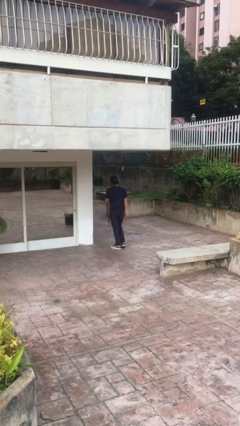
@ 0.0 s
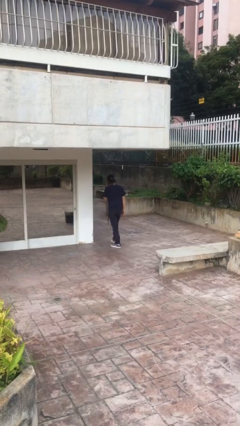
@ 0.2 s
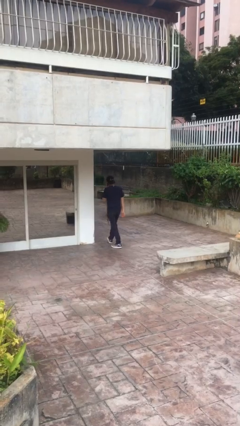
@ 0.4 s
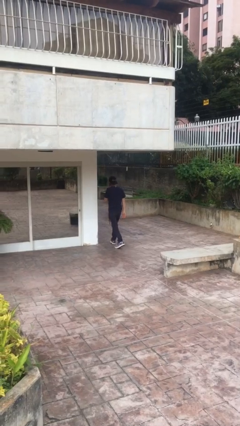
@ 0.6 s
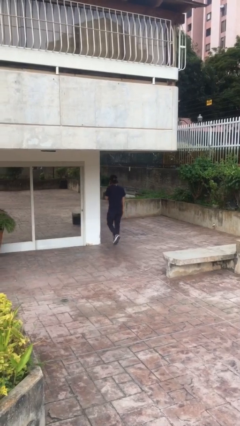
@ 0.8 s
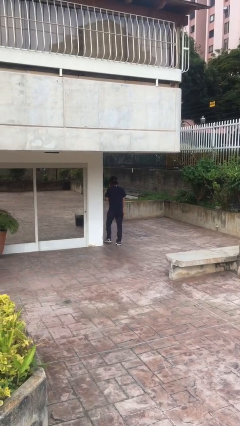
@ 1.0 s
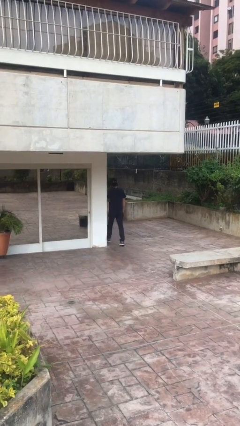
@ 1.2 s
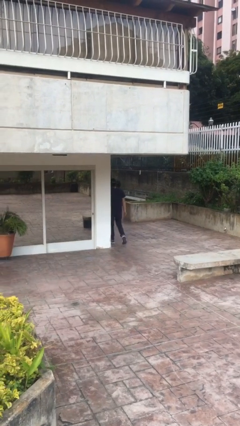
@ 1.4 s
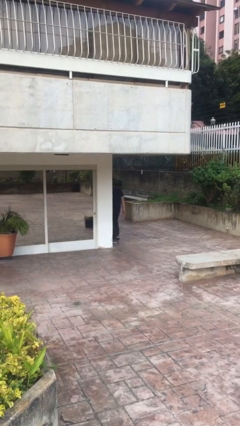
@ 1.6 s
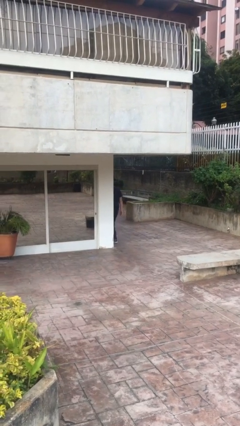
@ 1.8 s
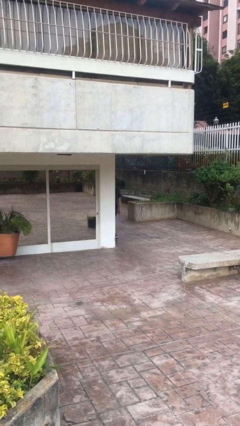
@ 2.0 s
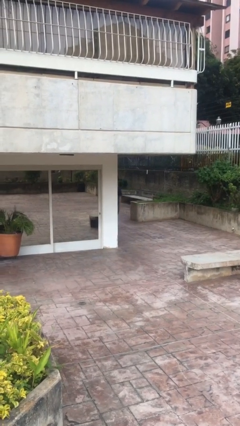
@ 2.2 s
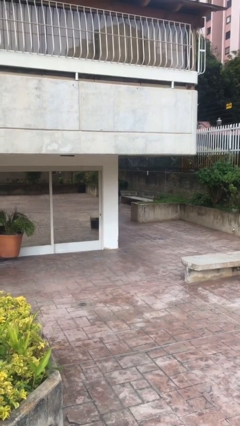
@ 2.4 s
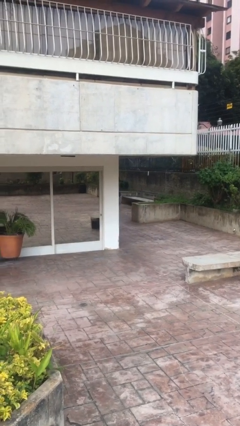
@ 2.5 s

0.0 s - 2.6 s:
person exits scene through structure

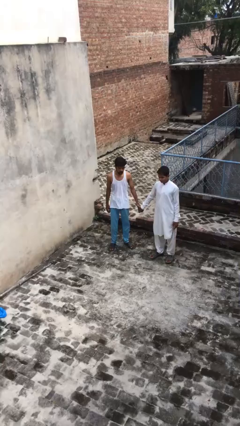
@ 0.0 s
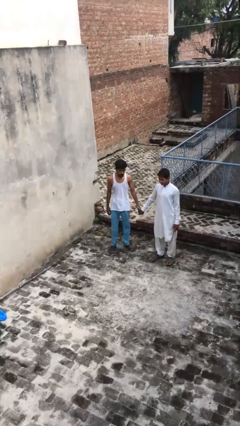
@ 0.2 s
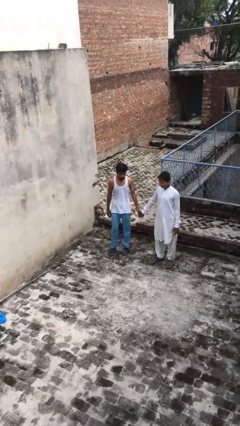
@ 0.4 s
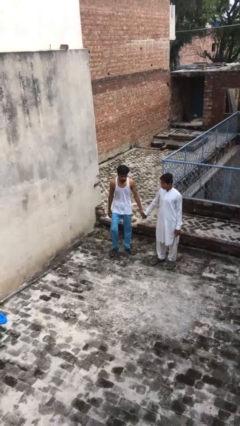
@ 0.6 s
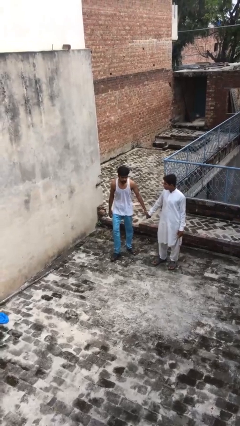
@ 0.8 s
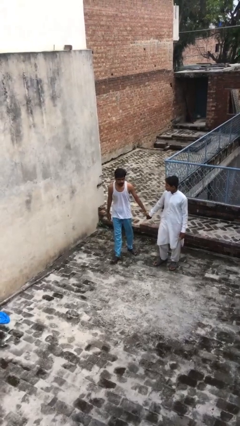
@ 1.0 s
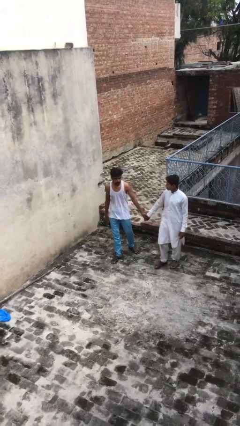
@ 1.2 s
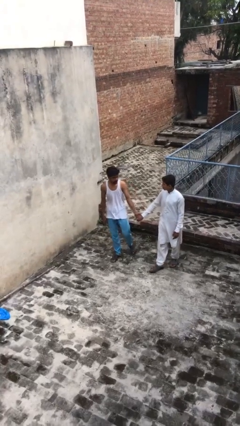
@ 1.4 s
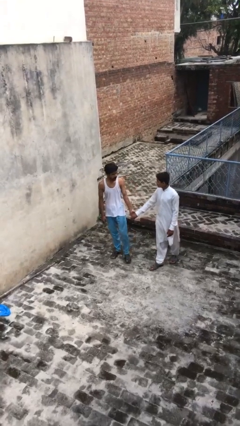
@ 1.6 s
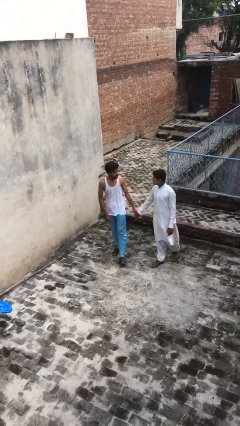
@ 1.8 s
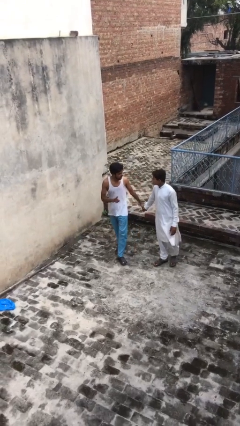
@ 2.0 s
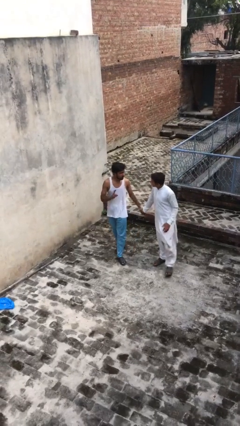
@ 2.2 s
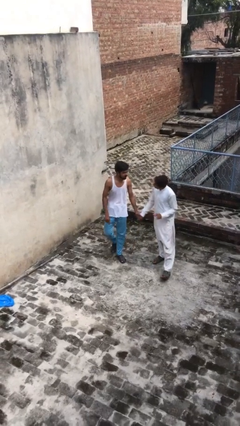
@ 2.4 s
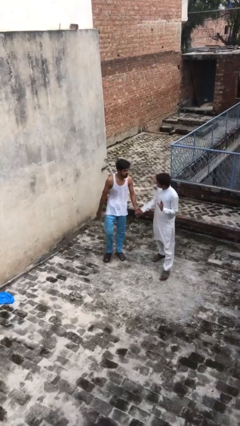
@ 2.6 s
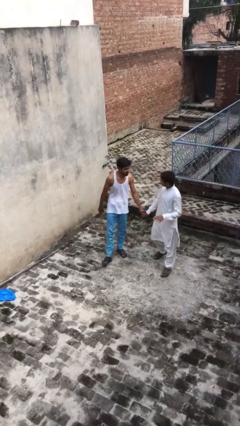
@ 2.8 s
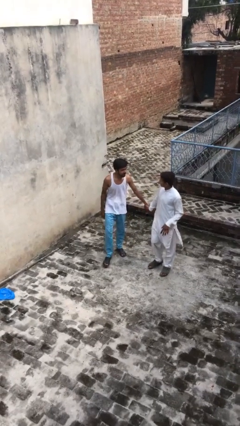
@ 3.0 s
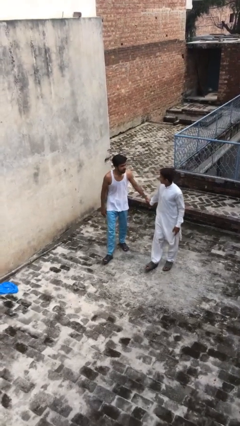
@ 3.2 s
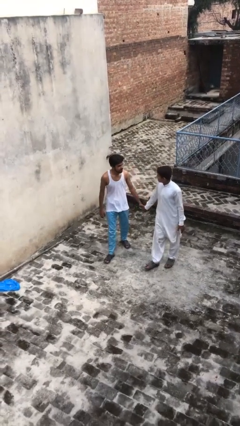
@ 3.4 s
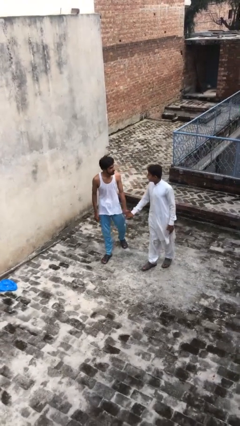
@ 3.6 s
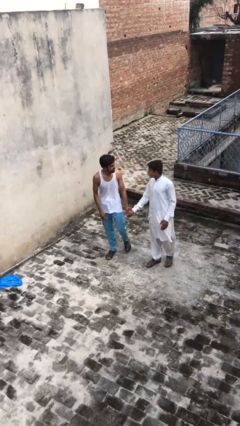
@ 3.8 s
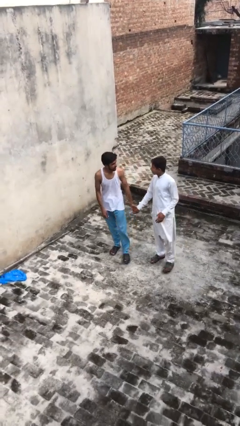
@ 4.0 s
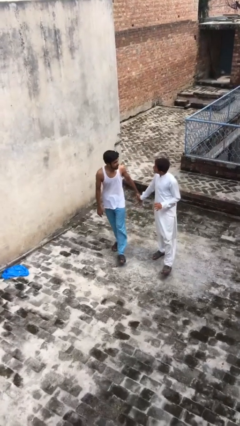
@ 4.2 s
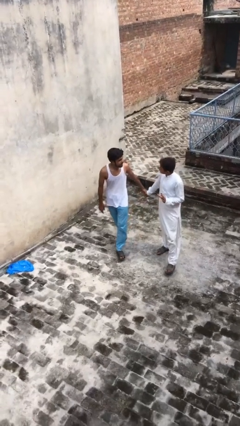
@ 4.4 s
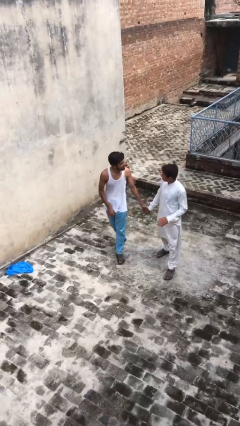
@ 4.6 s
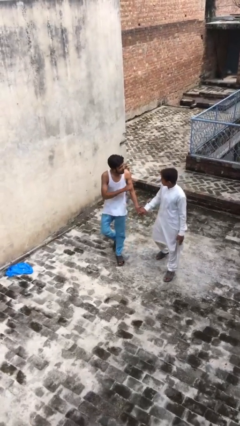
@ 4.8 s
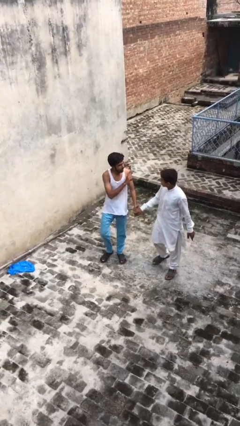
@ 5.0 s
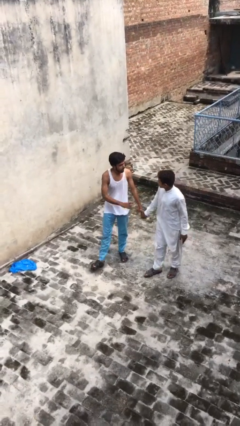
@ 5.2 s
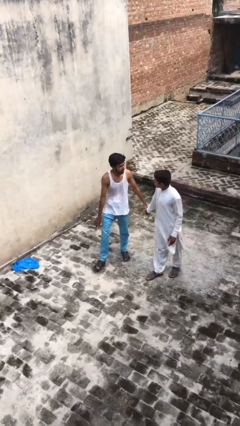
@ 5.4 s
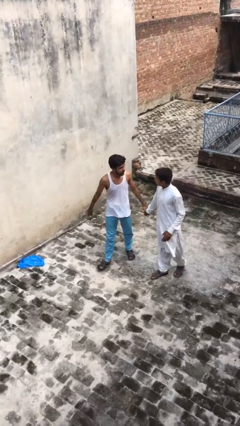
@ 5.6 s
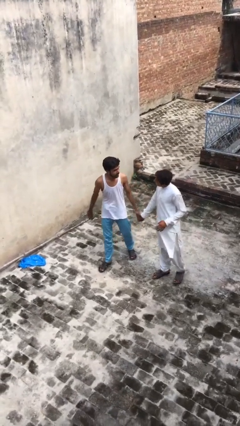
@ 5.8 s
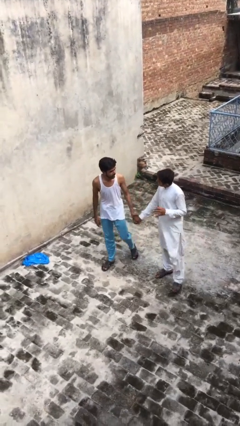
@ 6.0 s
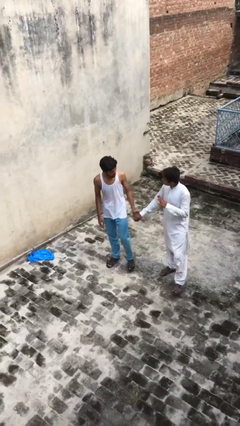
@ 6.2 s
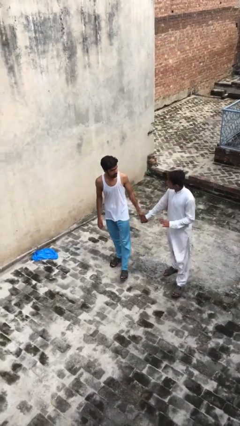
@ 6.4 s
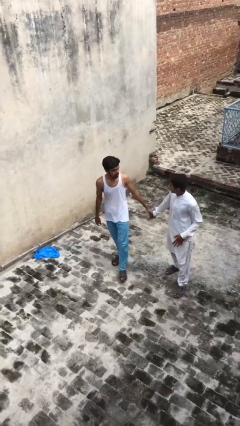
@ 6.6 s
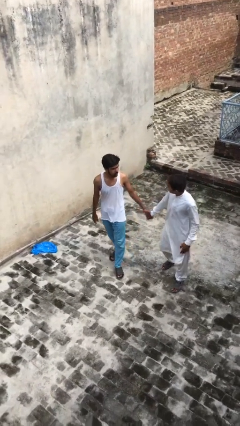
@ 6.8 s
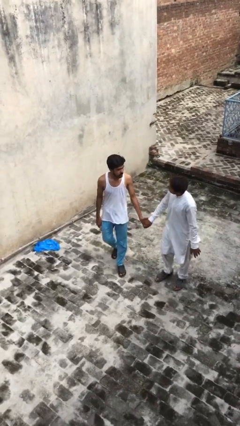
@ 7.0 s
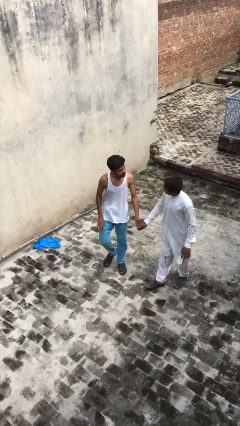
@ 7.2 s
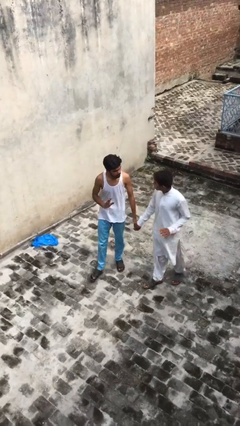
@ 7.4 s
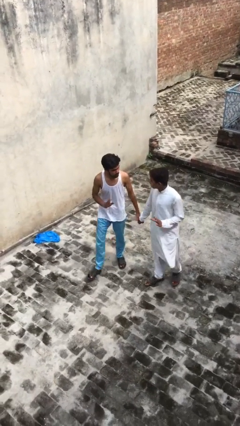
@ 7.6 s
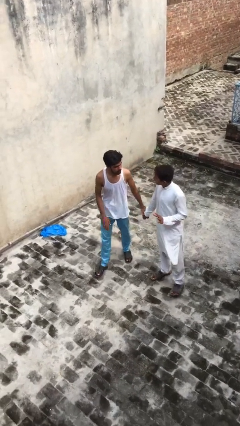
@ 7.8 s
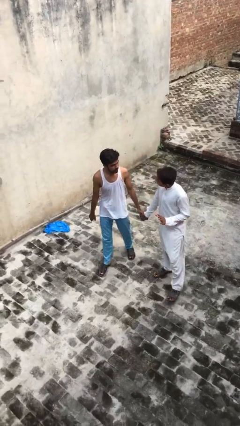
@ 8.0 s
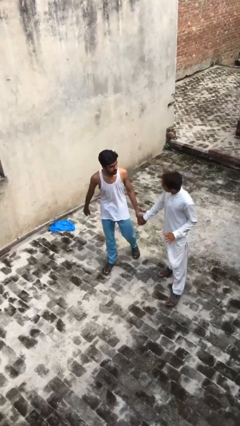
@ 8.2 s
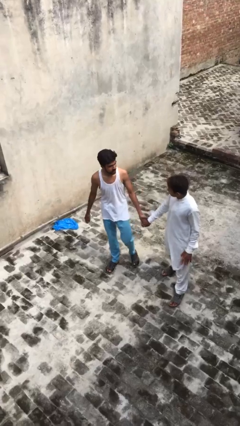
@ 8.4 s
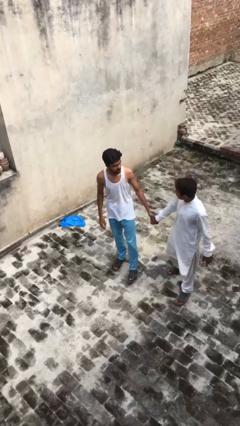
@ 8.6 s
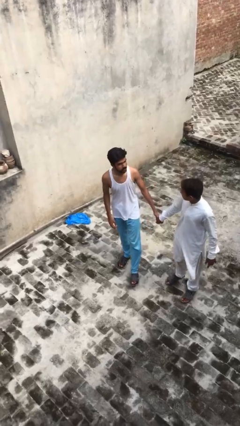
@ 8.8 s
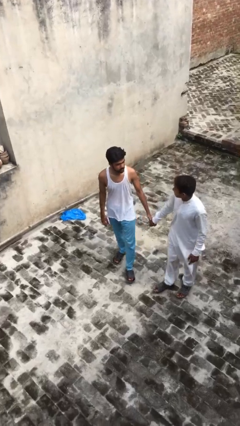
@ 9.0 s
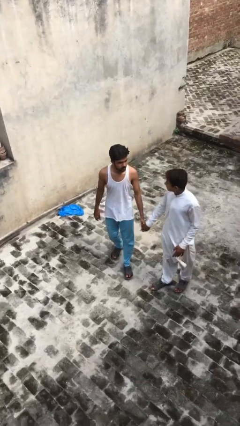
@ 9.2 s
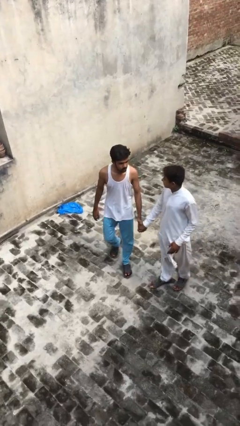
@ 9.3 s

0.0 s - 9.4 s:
person holds hand

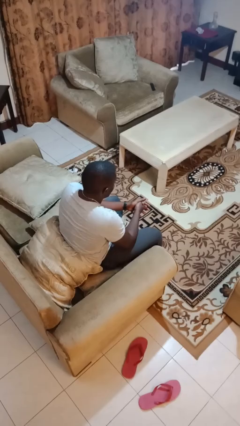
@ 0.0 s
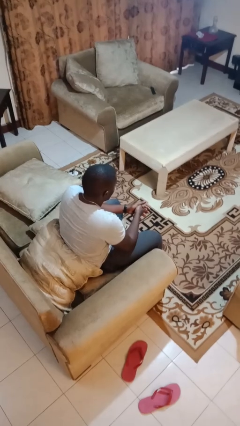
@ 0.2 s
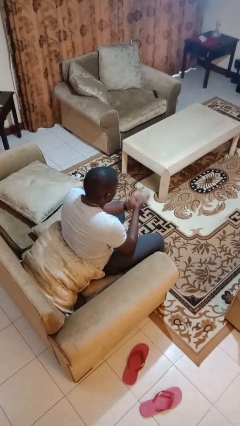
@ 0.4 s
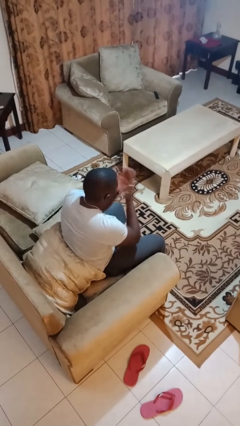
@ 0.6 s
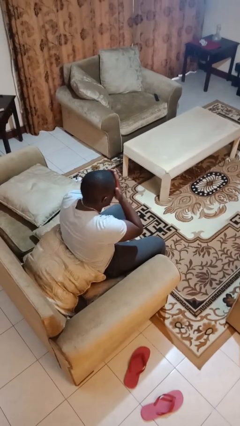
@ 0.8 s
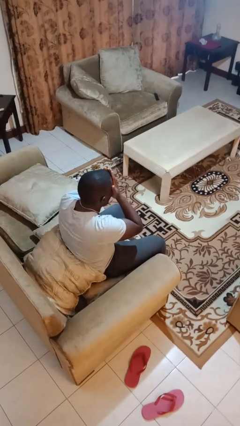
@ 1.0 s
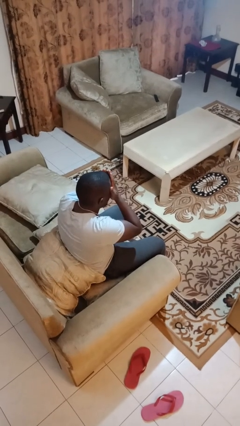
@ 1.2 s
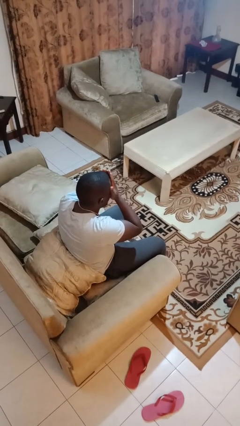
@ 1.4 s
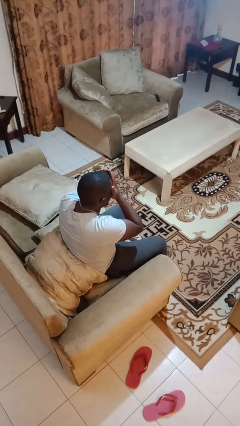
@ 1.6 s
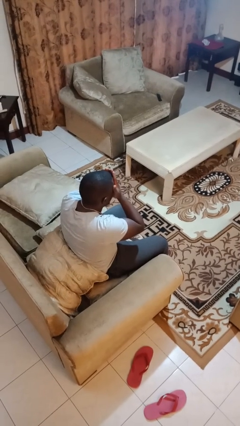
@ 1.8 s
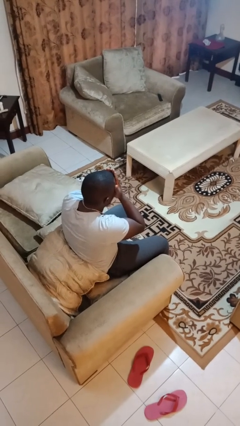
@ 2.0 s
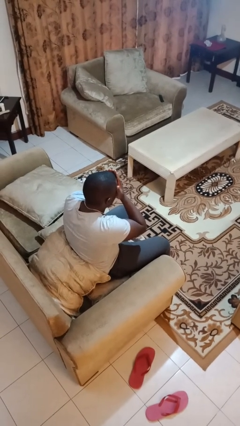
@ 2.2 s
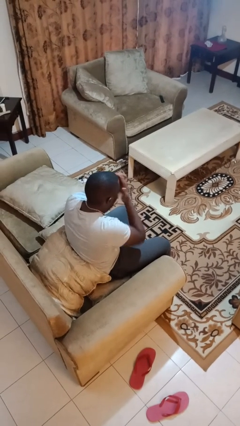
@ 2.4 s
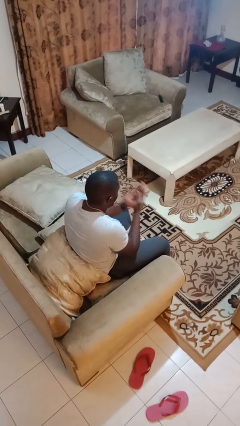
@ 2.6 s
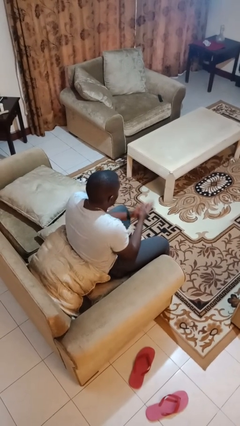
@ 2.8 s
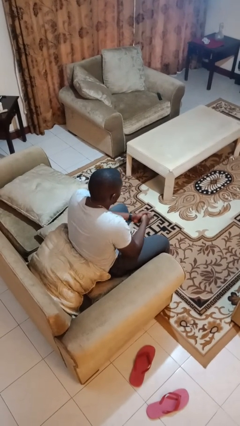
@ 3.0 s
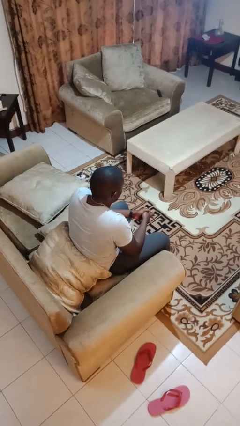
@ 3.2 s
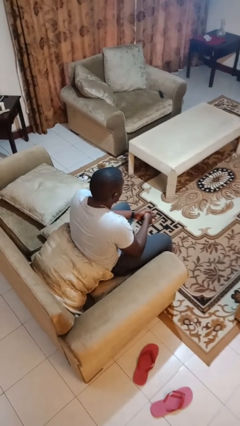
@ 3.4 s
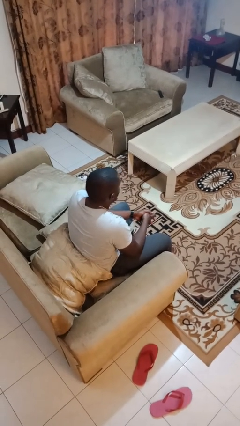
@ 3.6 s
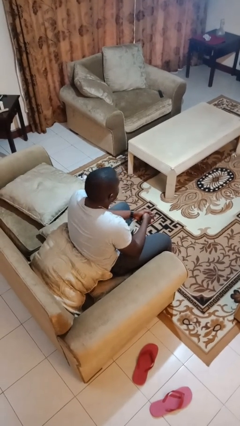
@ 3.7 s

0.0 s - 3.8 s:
person covers face with hands

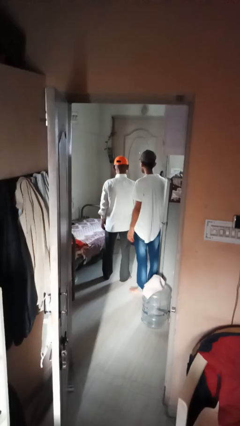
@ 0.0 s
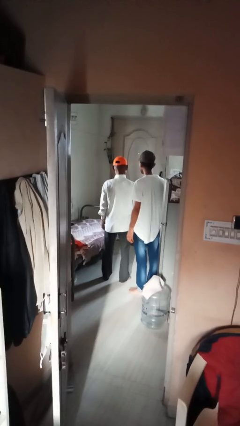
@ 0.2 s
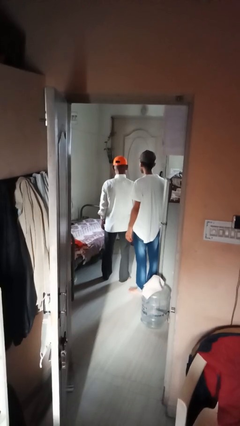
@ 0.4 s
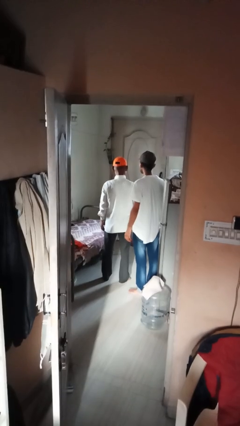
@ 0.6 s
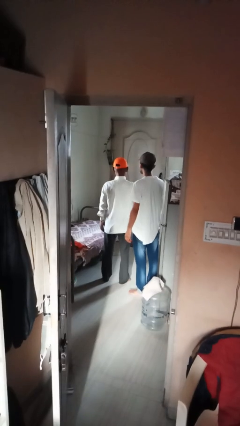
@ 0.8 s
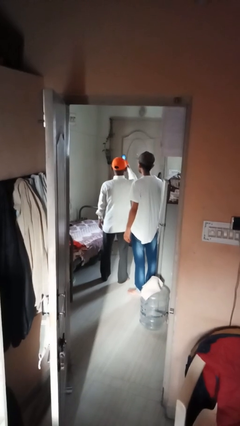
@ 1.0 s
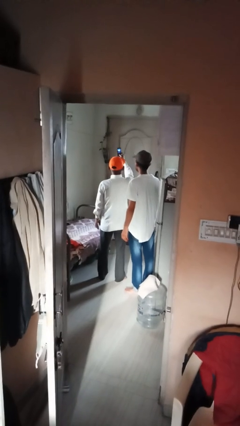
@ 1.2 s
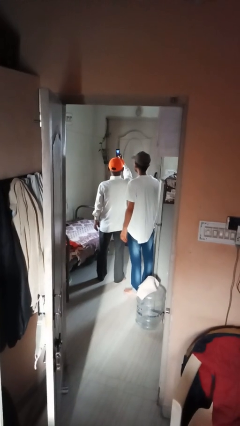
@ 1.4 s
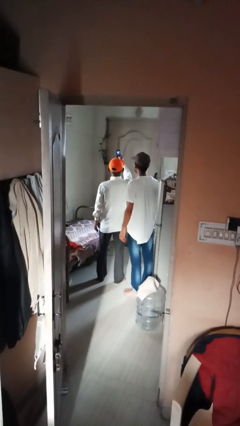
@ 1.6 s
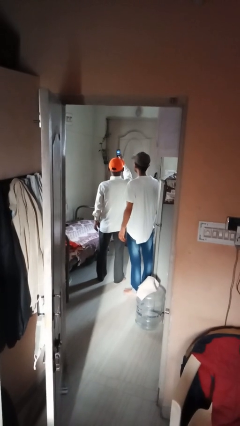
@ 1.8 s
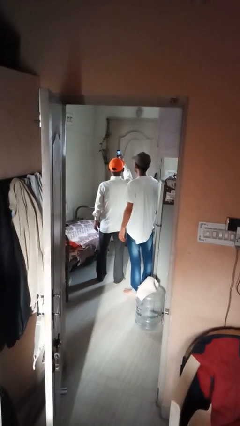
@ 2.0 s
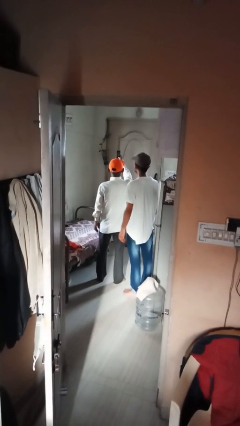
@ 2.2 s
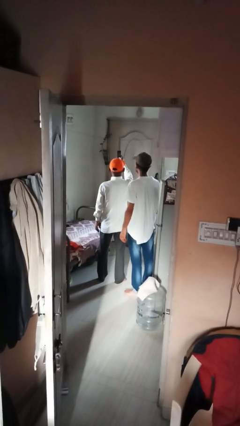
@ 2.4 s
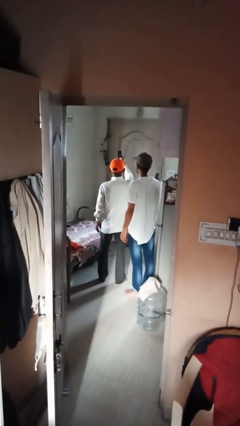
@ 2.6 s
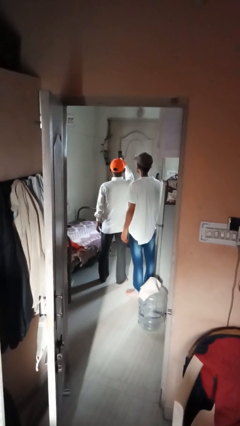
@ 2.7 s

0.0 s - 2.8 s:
person takes selfie with person
